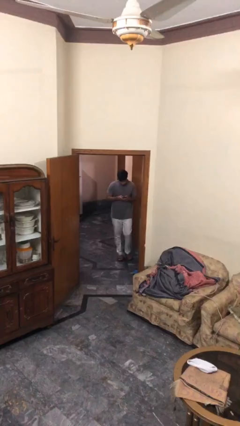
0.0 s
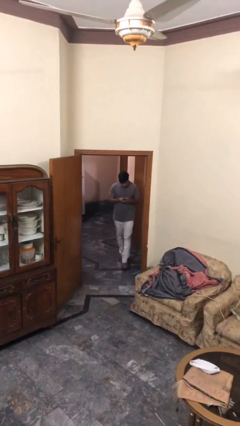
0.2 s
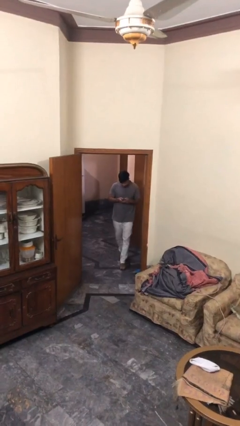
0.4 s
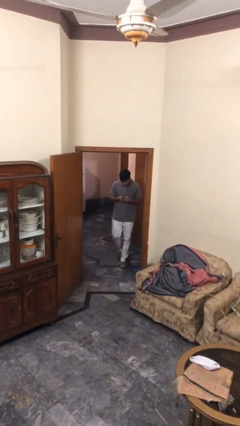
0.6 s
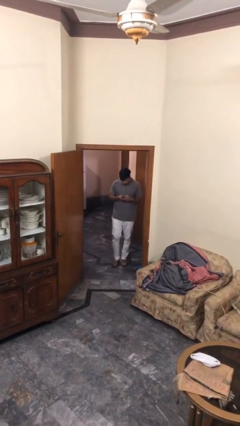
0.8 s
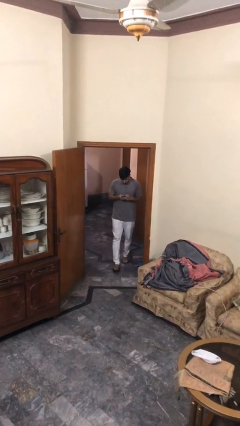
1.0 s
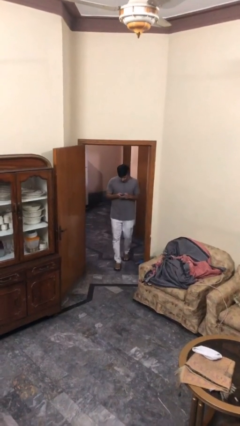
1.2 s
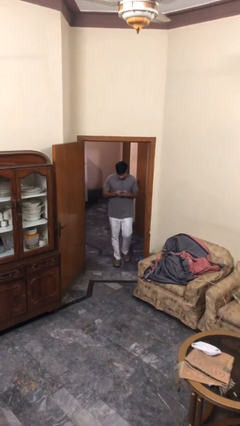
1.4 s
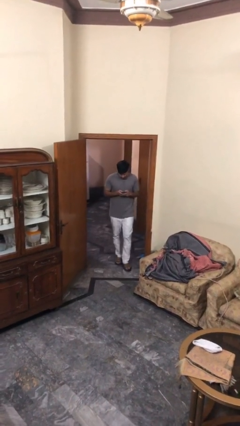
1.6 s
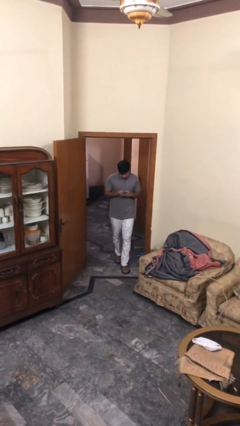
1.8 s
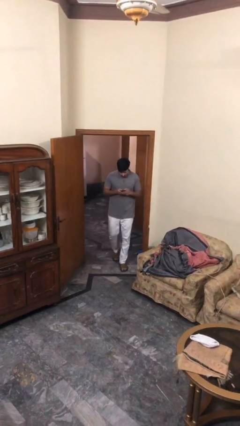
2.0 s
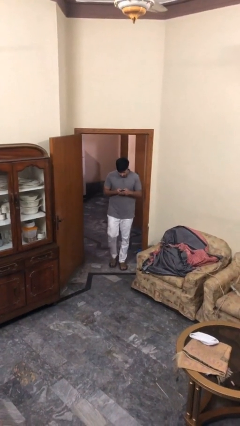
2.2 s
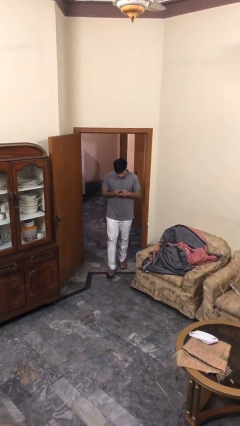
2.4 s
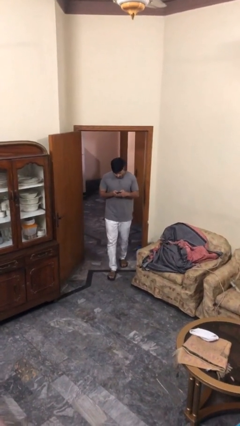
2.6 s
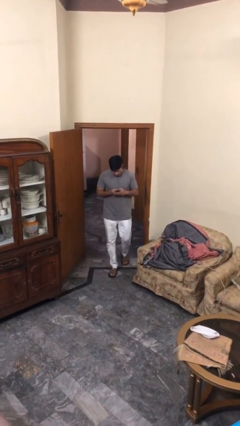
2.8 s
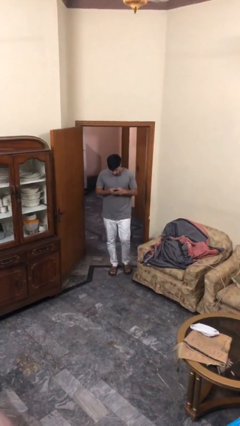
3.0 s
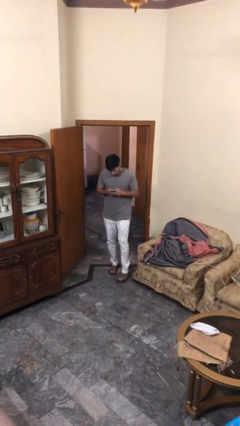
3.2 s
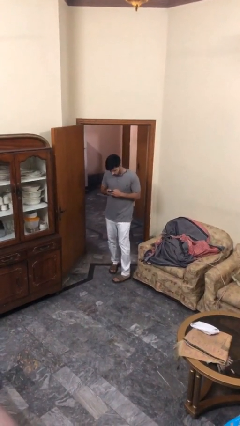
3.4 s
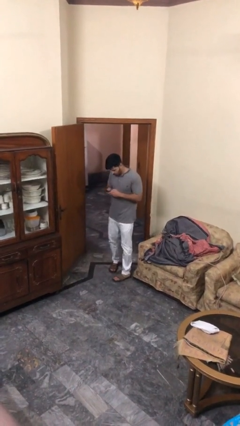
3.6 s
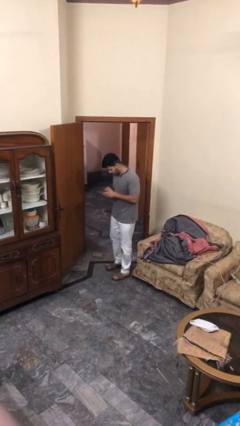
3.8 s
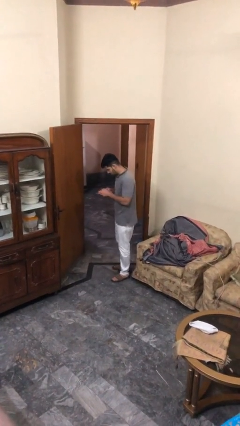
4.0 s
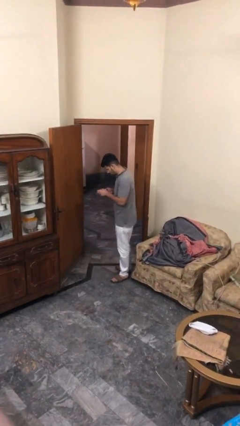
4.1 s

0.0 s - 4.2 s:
person enters scene through structure

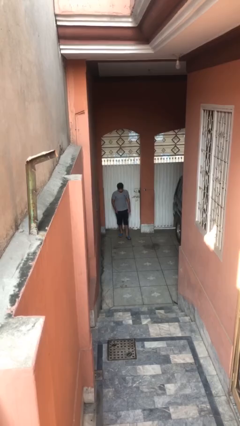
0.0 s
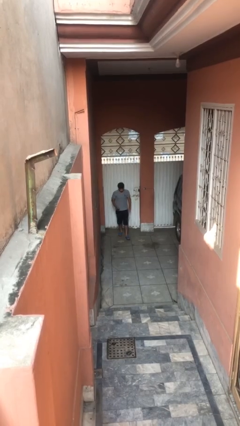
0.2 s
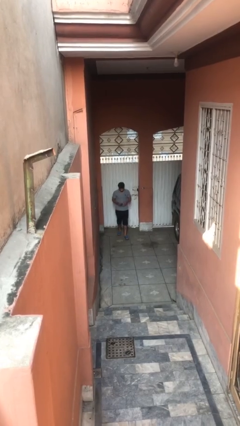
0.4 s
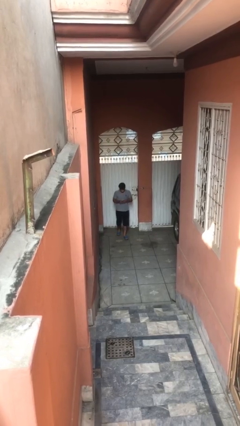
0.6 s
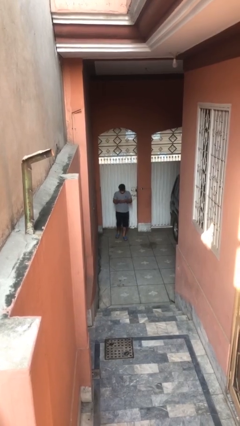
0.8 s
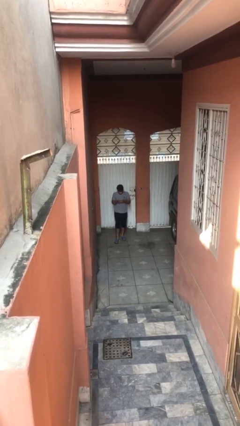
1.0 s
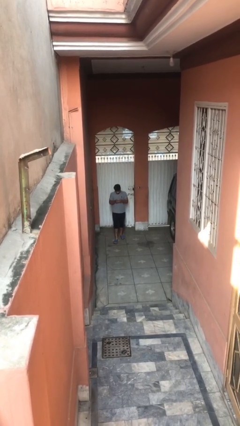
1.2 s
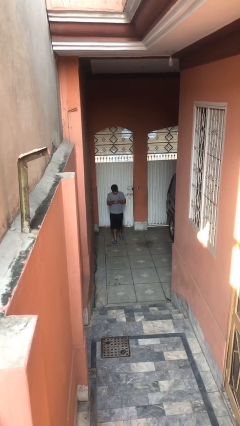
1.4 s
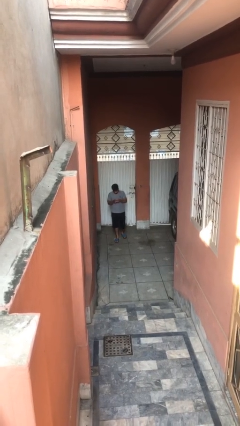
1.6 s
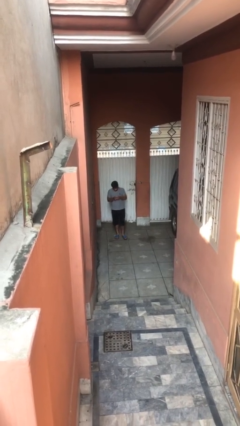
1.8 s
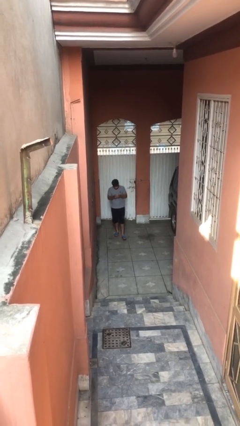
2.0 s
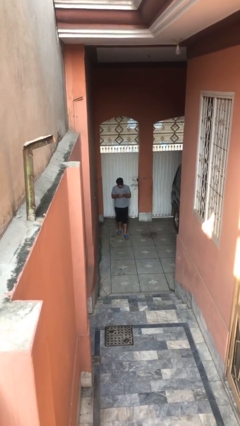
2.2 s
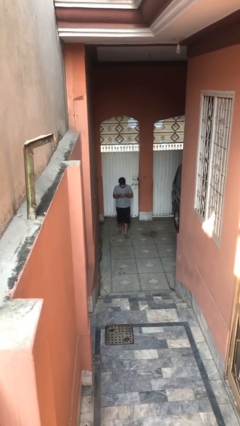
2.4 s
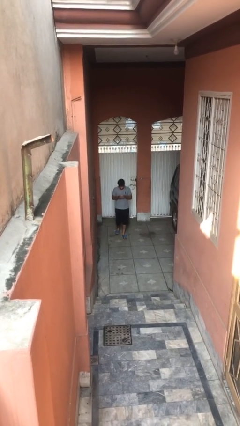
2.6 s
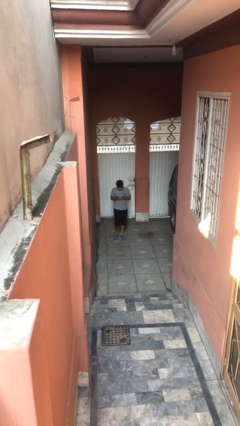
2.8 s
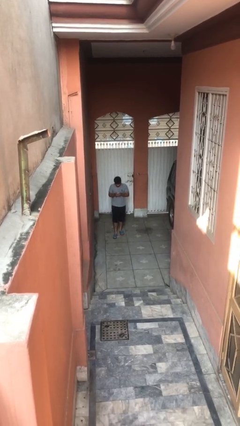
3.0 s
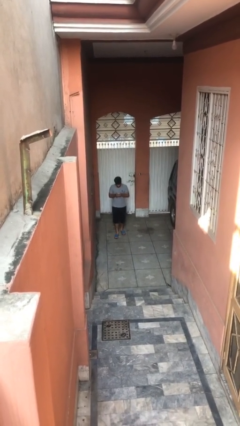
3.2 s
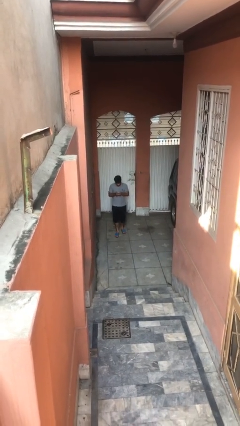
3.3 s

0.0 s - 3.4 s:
person texts on phone

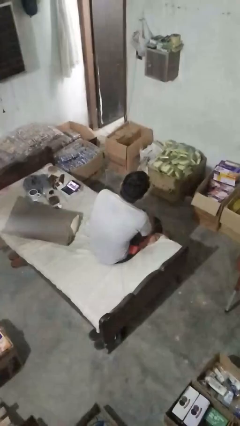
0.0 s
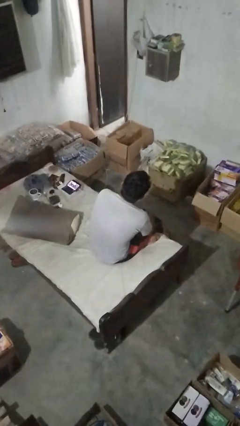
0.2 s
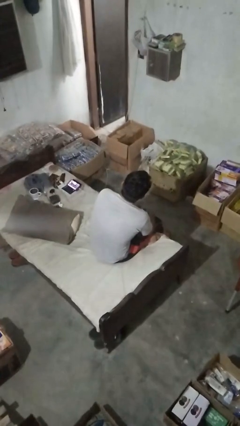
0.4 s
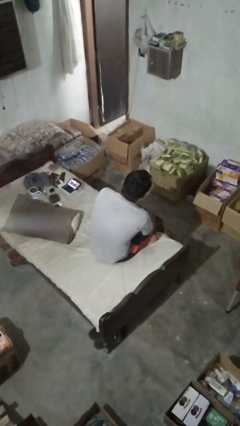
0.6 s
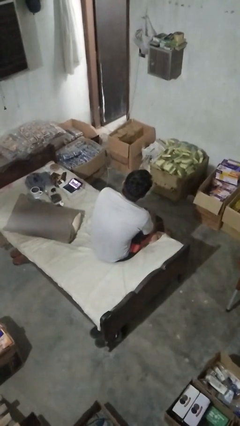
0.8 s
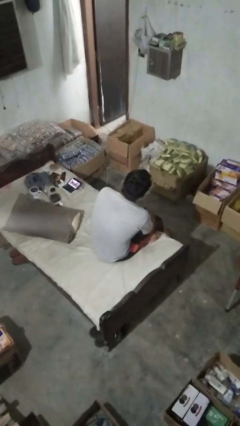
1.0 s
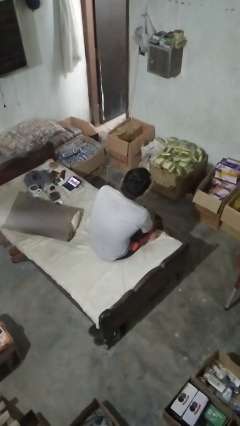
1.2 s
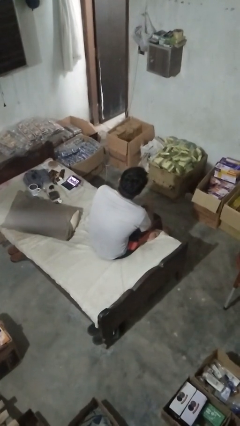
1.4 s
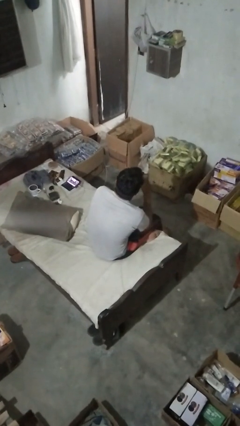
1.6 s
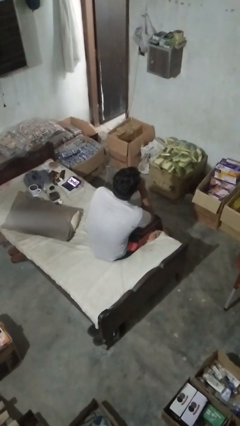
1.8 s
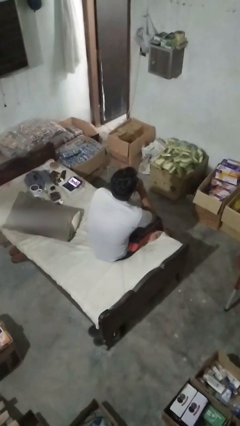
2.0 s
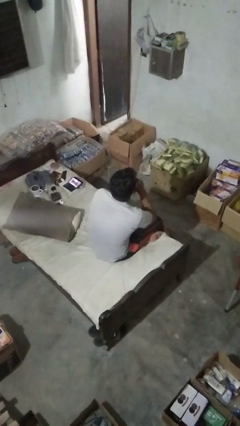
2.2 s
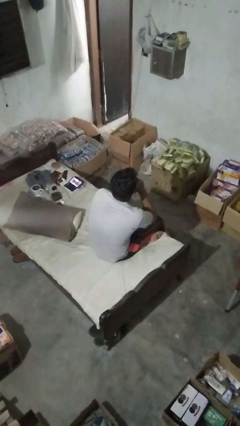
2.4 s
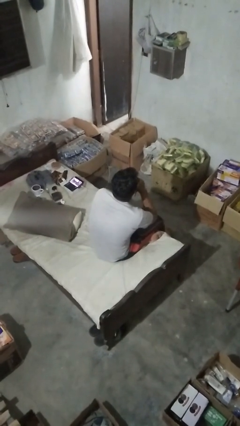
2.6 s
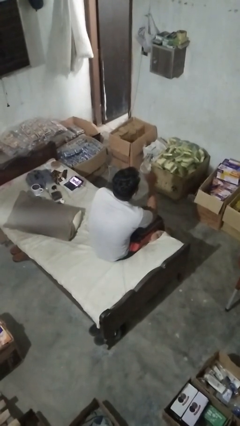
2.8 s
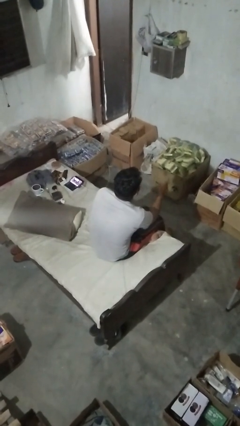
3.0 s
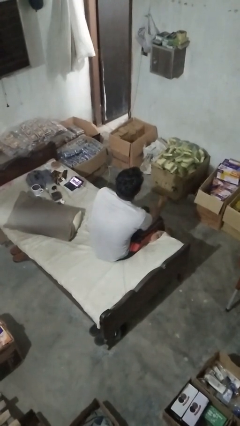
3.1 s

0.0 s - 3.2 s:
person gestures be quiet

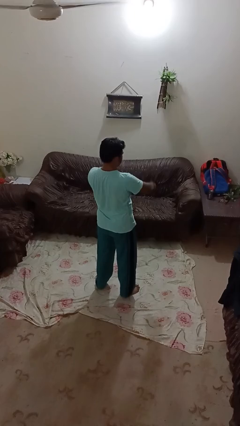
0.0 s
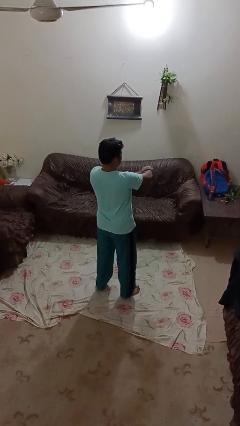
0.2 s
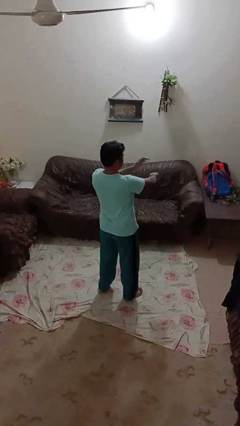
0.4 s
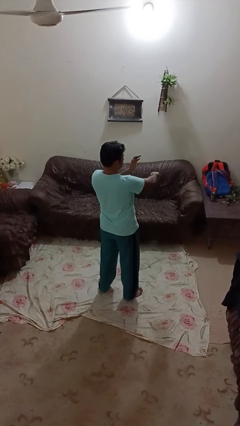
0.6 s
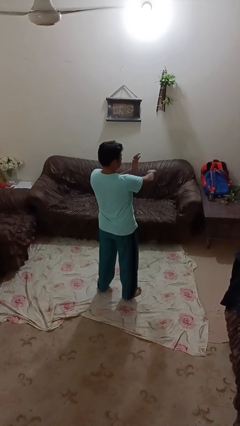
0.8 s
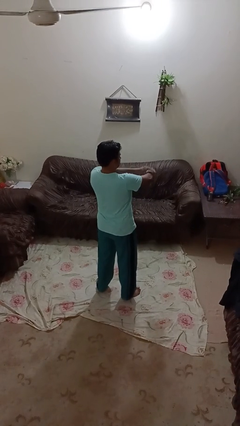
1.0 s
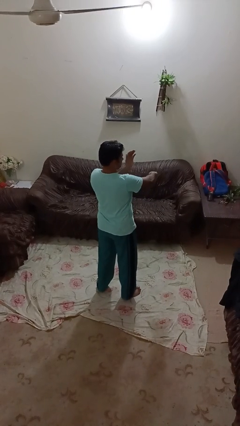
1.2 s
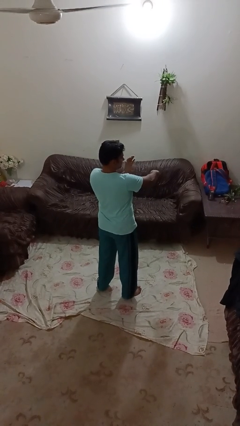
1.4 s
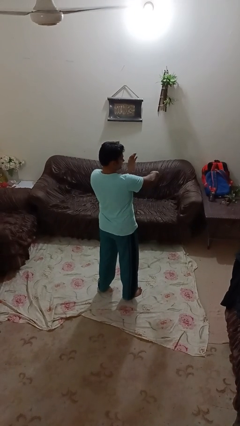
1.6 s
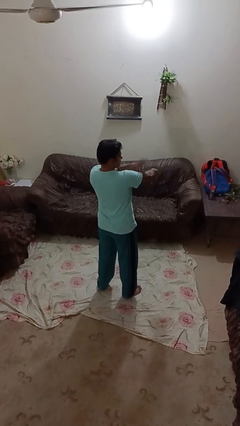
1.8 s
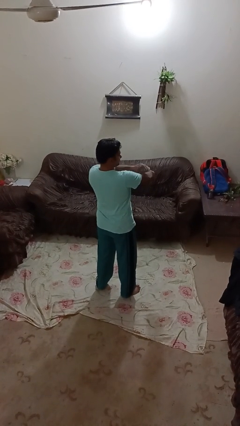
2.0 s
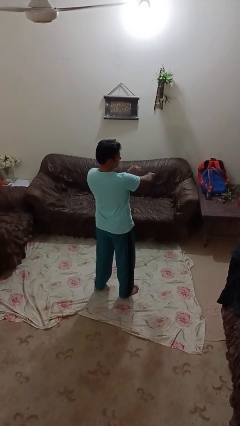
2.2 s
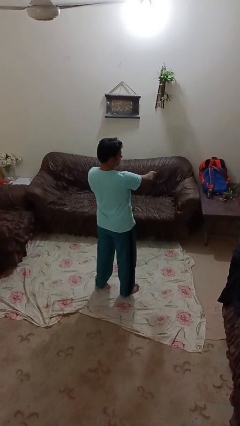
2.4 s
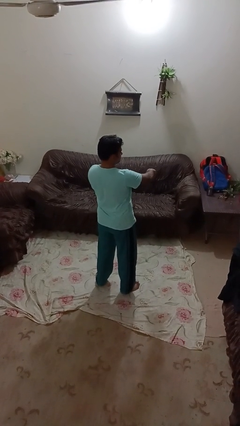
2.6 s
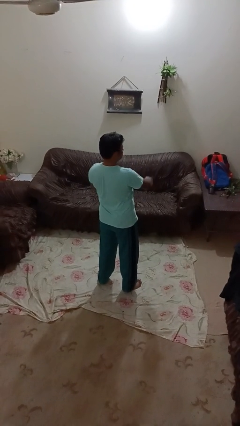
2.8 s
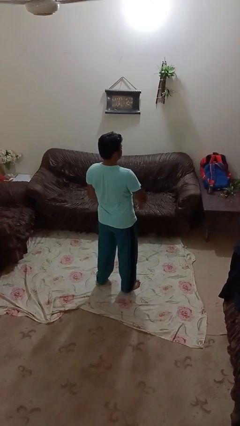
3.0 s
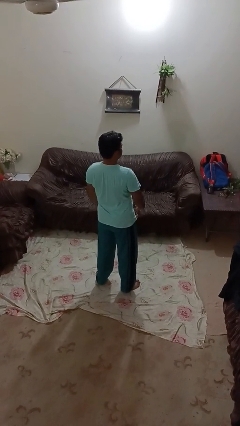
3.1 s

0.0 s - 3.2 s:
person swats bug

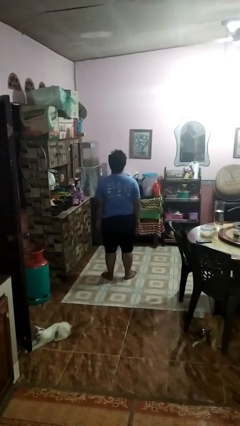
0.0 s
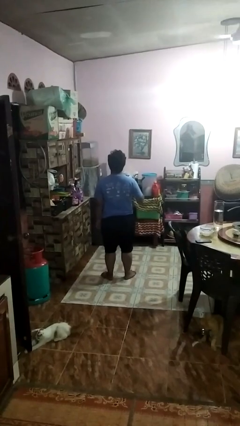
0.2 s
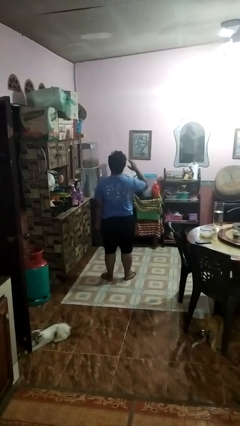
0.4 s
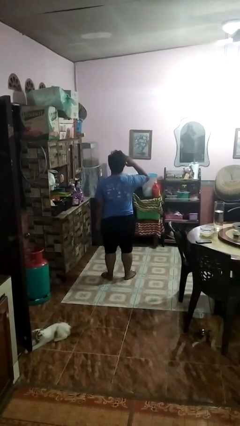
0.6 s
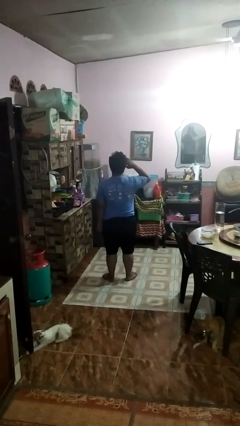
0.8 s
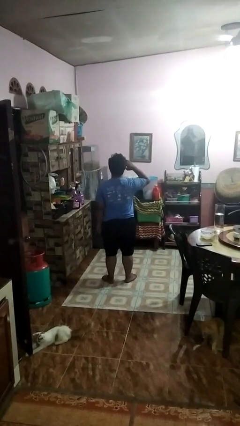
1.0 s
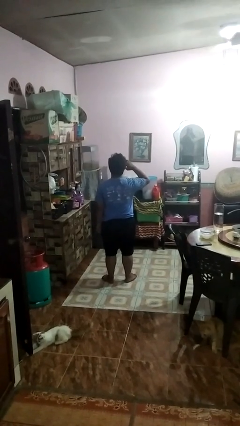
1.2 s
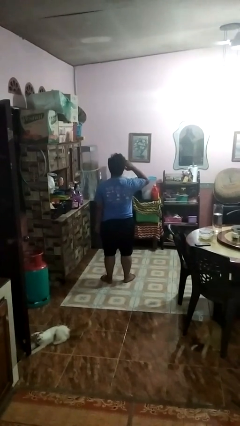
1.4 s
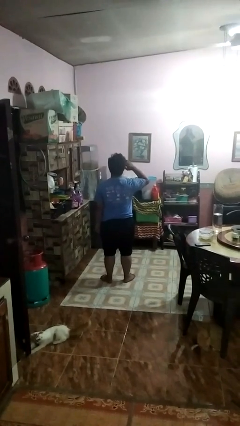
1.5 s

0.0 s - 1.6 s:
person salutes

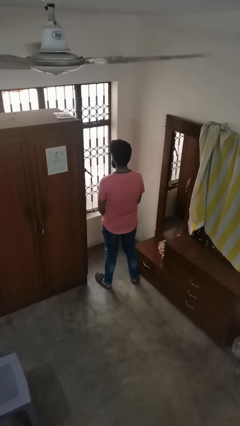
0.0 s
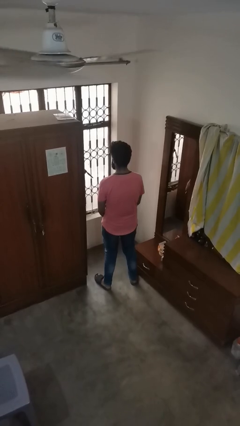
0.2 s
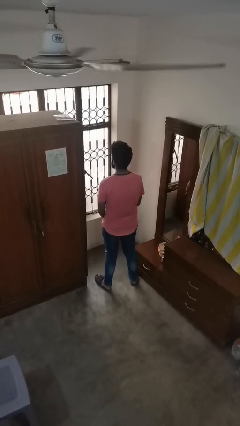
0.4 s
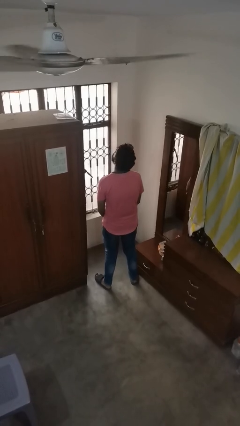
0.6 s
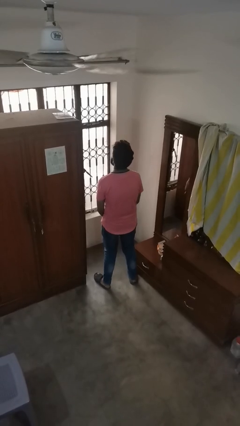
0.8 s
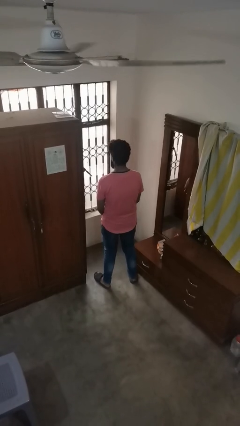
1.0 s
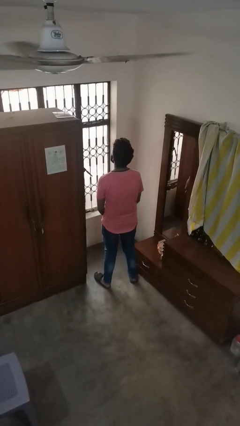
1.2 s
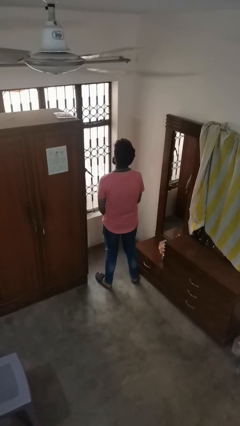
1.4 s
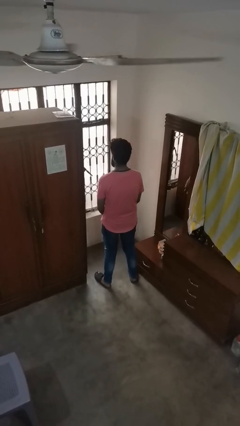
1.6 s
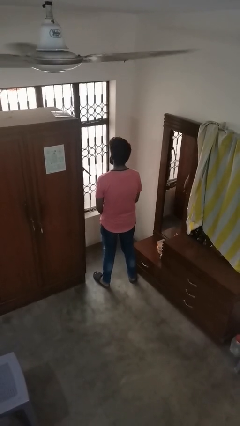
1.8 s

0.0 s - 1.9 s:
person nods head

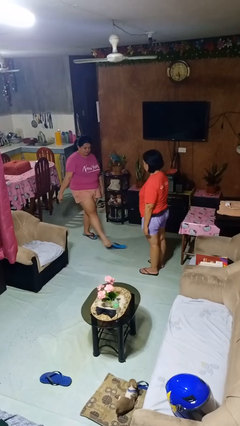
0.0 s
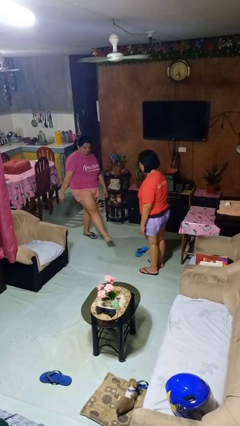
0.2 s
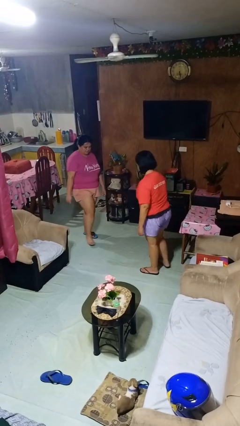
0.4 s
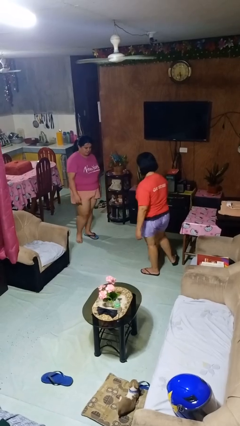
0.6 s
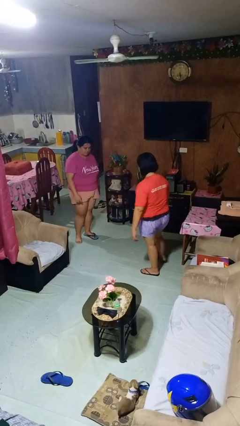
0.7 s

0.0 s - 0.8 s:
person kicks object to person
